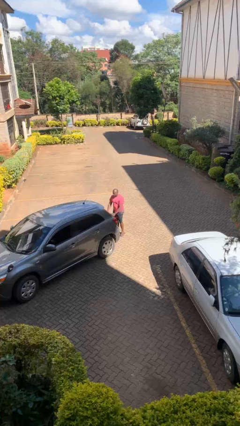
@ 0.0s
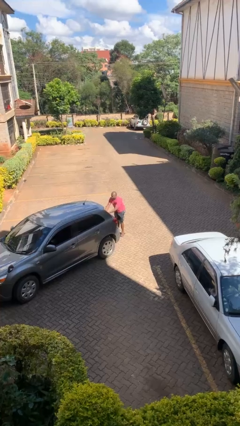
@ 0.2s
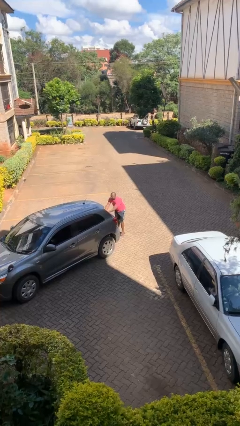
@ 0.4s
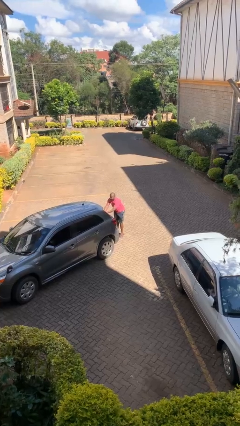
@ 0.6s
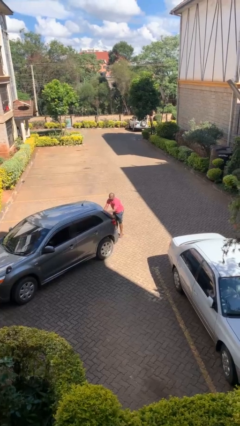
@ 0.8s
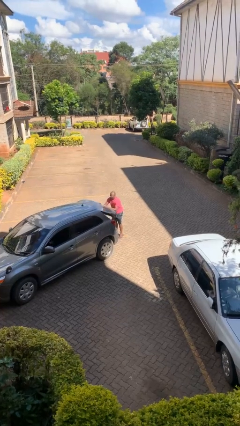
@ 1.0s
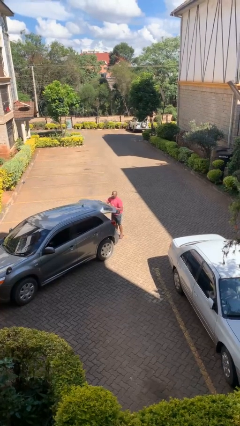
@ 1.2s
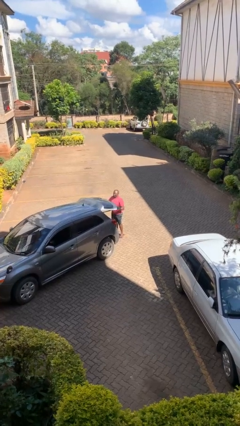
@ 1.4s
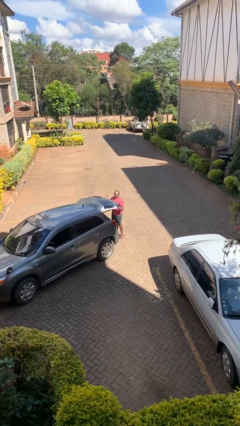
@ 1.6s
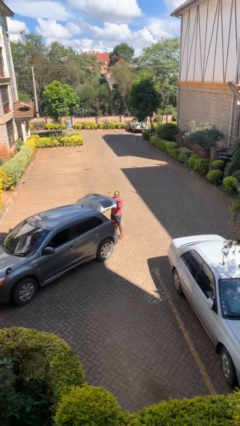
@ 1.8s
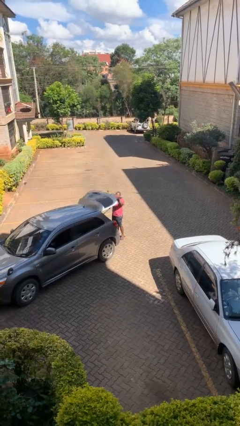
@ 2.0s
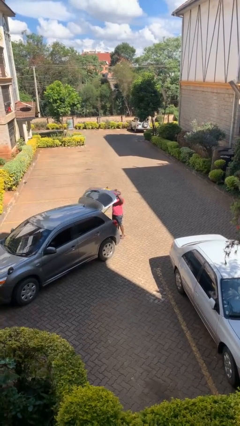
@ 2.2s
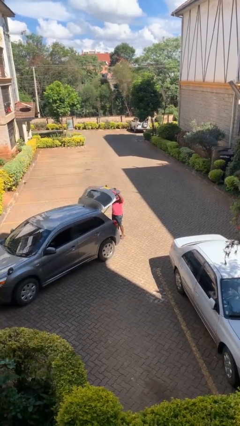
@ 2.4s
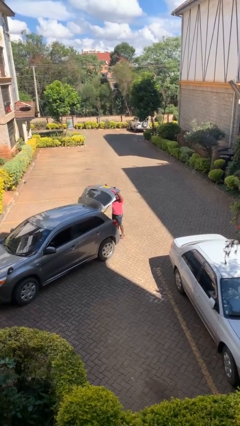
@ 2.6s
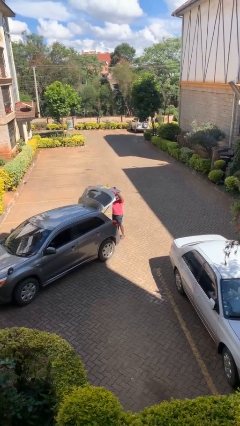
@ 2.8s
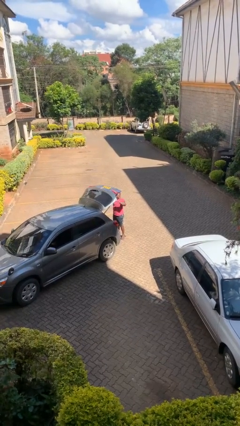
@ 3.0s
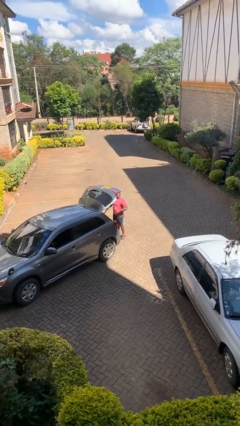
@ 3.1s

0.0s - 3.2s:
person opens car trunk

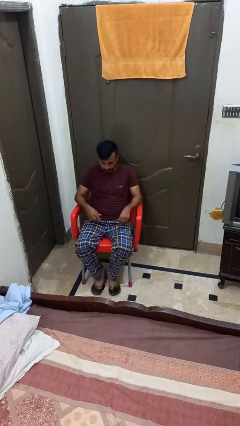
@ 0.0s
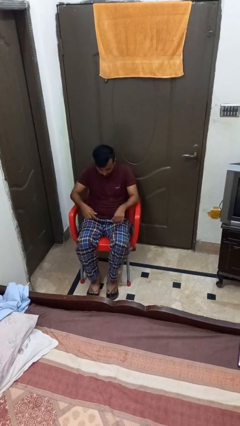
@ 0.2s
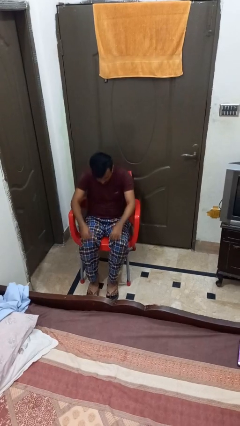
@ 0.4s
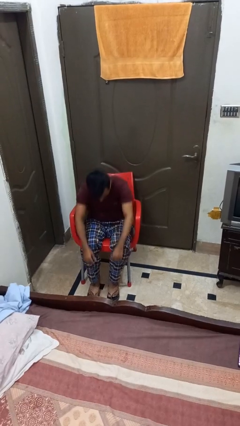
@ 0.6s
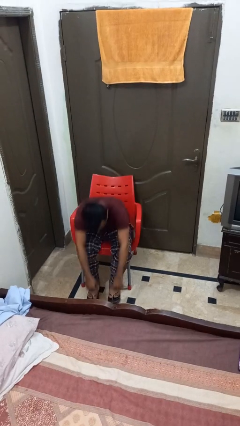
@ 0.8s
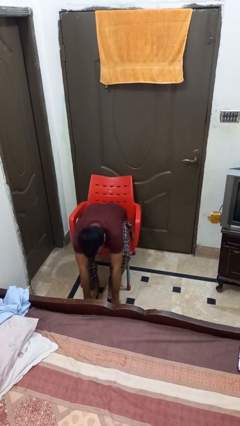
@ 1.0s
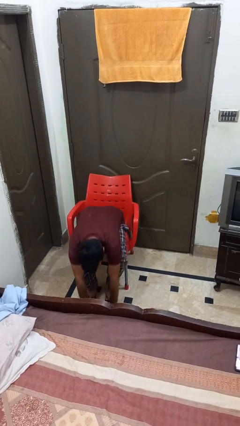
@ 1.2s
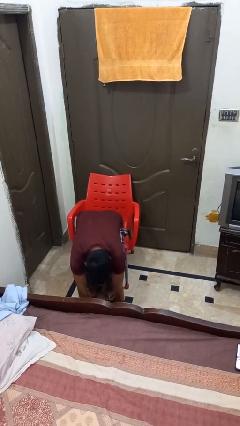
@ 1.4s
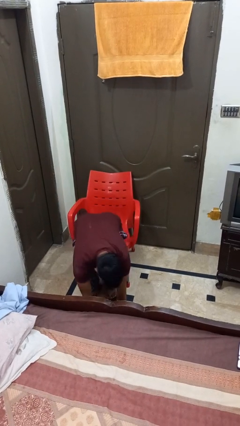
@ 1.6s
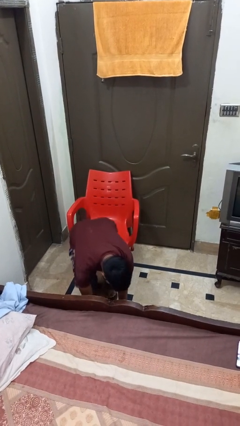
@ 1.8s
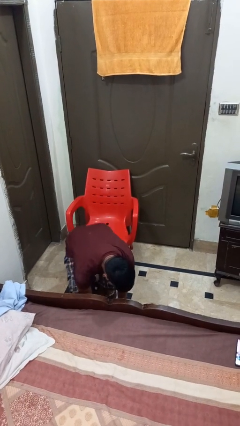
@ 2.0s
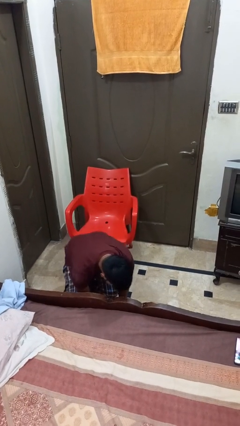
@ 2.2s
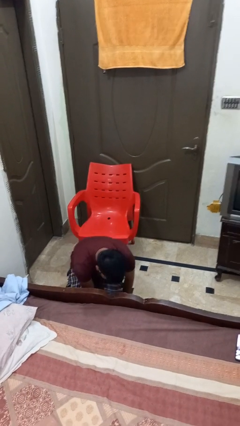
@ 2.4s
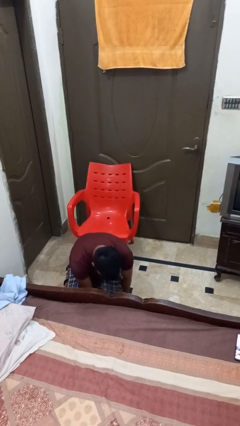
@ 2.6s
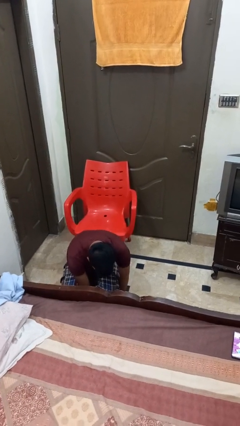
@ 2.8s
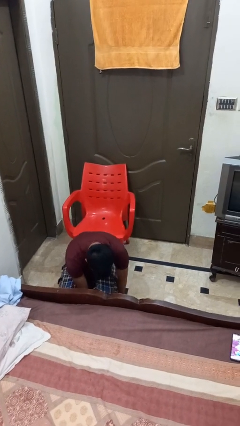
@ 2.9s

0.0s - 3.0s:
person falls from chair

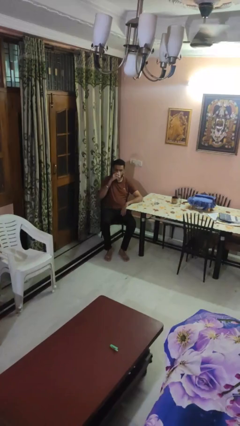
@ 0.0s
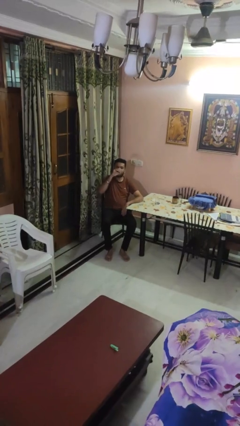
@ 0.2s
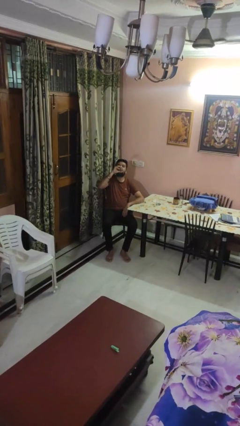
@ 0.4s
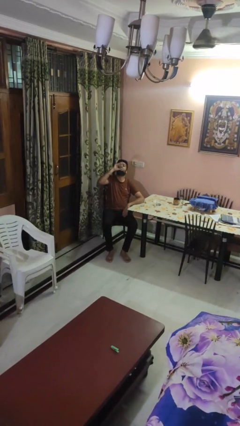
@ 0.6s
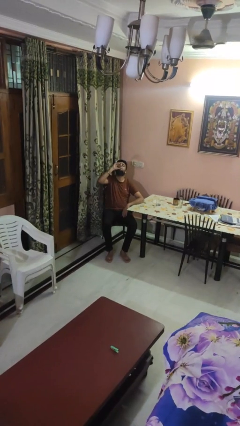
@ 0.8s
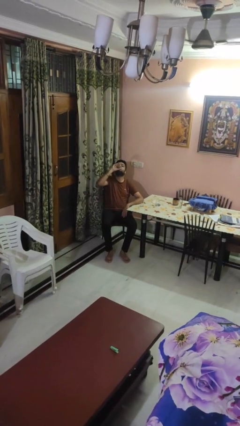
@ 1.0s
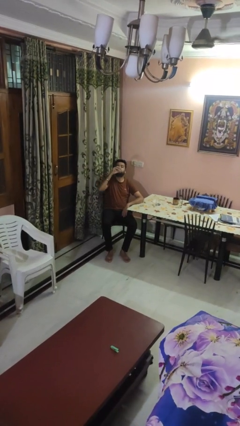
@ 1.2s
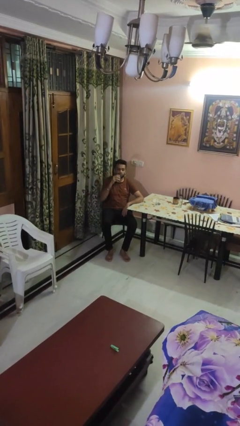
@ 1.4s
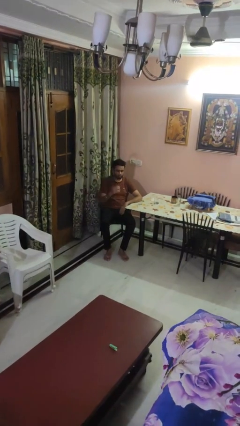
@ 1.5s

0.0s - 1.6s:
person drinks from shotglass

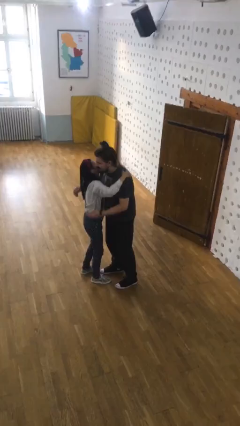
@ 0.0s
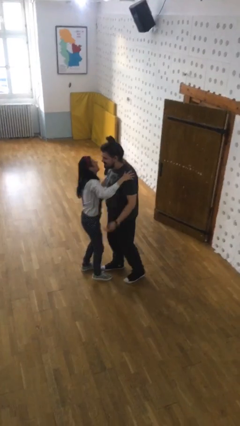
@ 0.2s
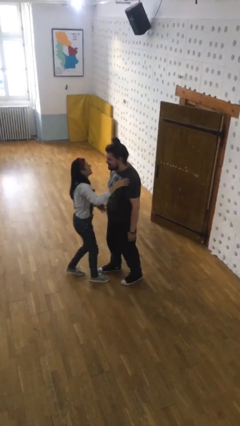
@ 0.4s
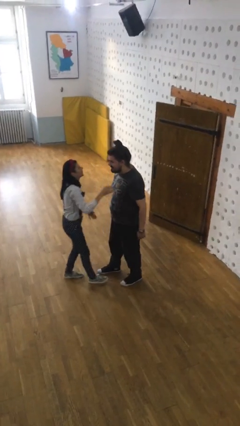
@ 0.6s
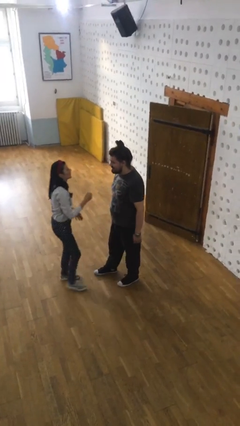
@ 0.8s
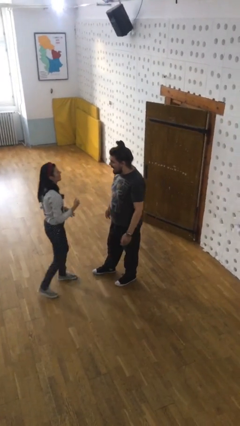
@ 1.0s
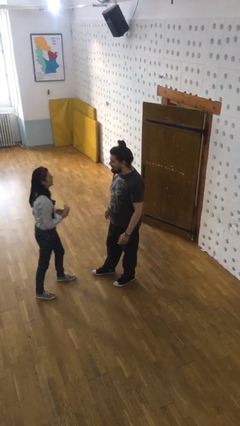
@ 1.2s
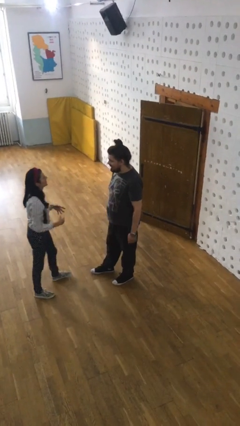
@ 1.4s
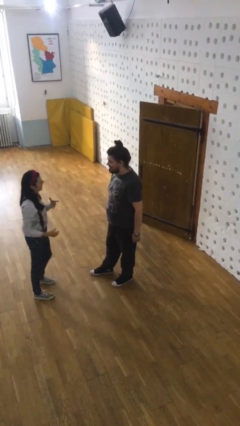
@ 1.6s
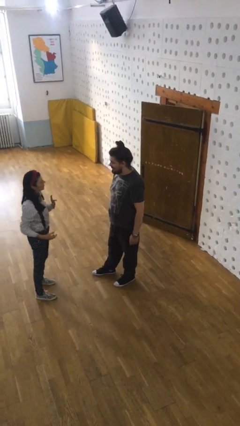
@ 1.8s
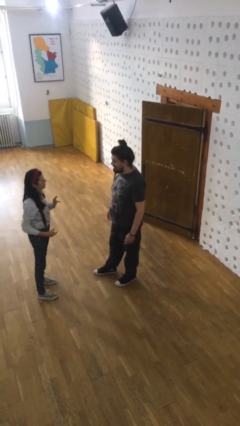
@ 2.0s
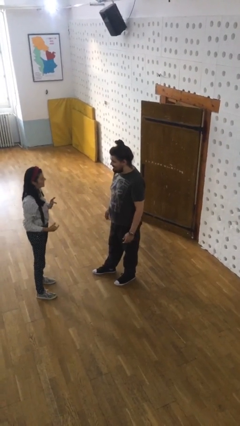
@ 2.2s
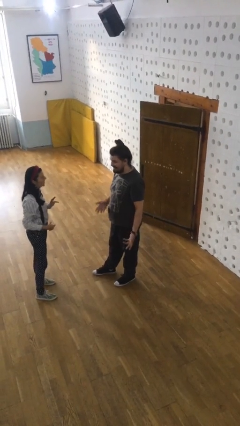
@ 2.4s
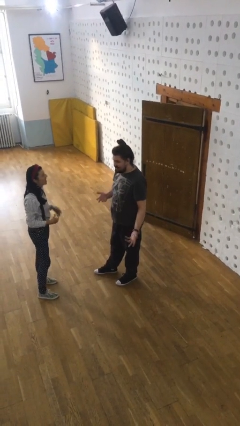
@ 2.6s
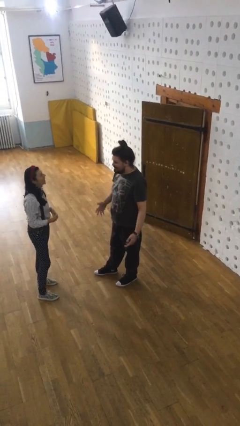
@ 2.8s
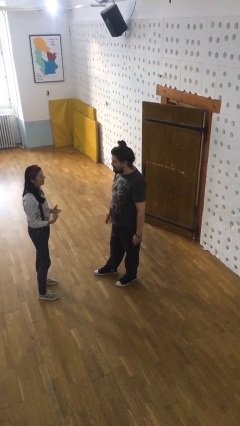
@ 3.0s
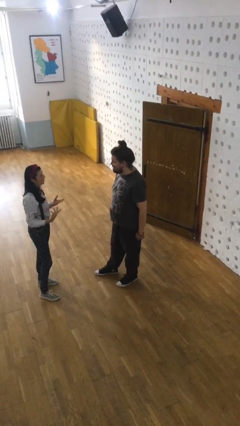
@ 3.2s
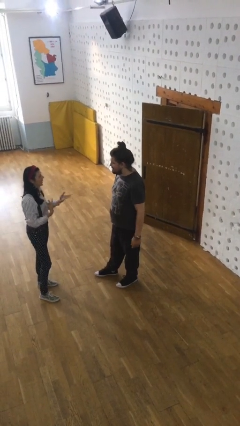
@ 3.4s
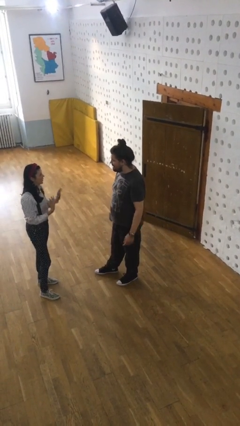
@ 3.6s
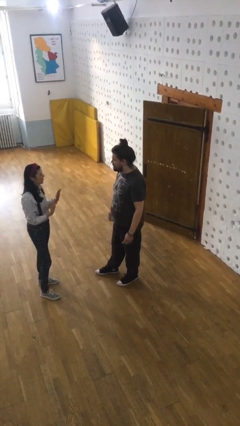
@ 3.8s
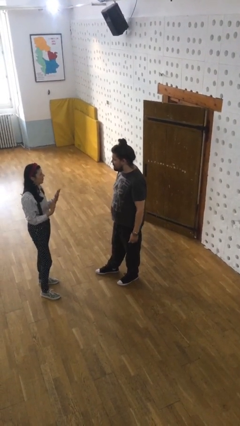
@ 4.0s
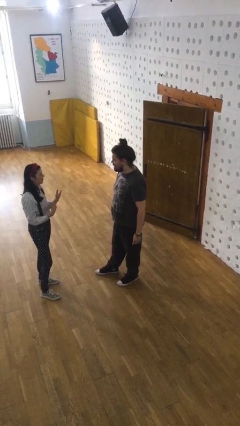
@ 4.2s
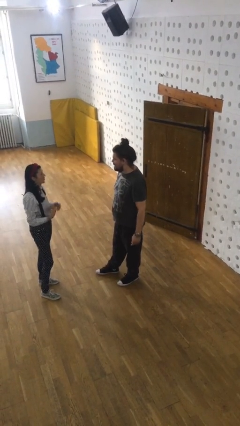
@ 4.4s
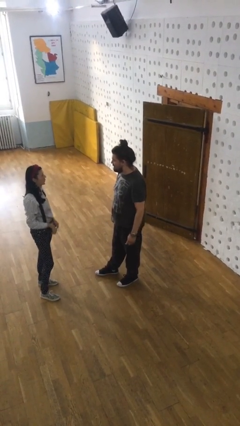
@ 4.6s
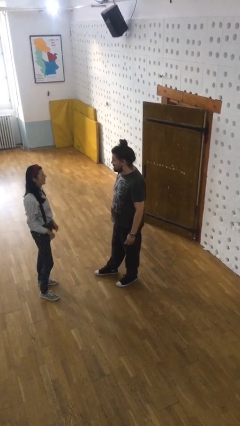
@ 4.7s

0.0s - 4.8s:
person talks to person

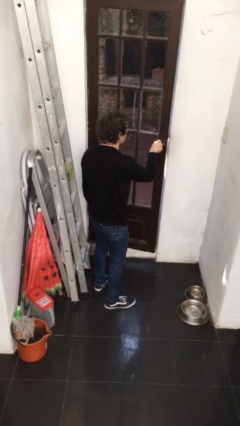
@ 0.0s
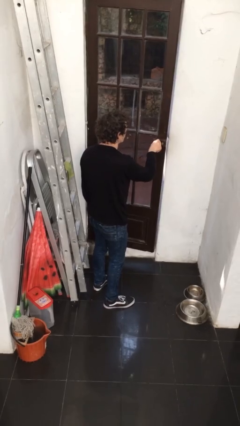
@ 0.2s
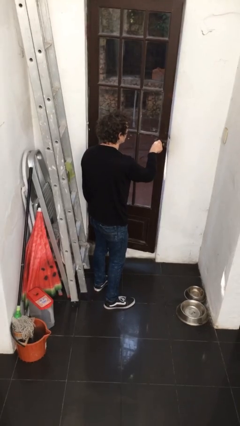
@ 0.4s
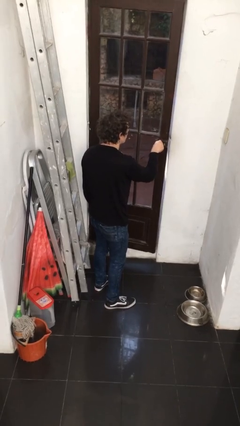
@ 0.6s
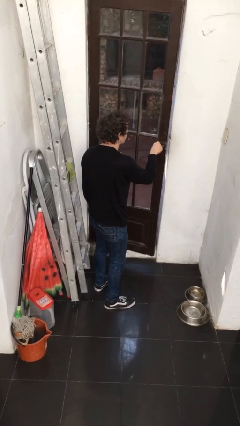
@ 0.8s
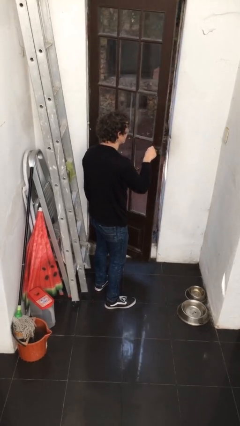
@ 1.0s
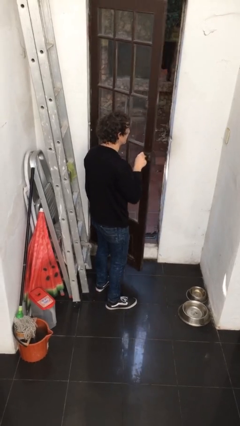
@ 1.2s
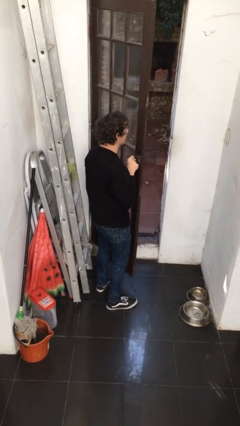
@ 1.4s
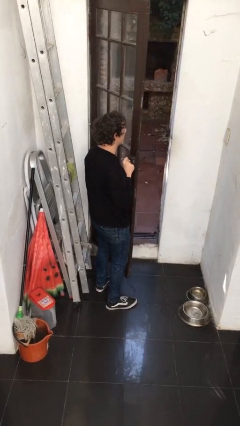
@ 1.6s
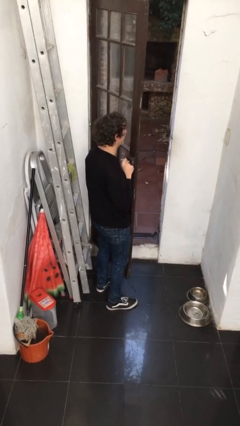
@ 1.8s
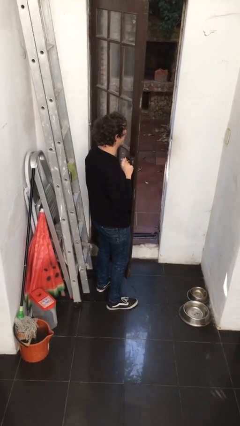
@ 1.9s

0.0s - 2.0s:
person opens facility door

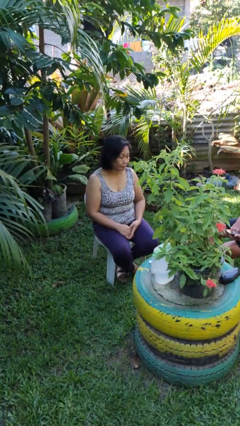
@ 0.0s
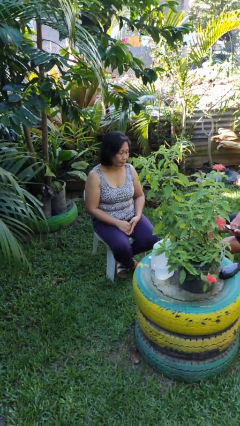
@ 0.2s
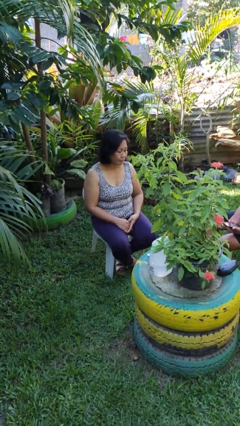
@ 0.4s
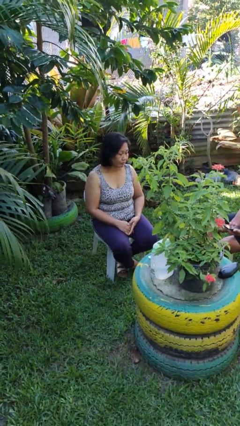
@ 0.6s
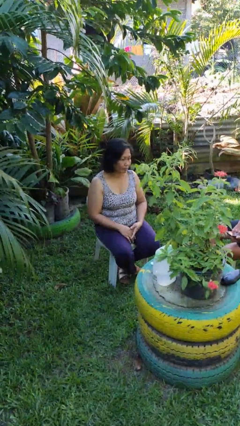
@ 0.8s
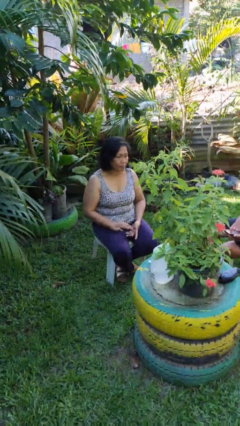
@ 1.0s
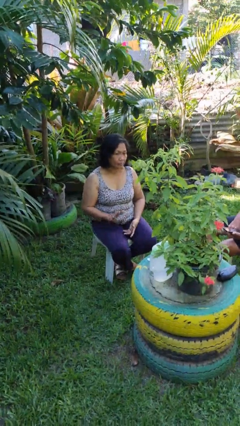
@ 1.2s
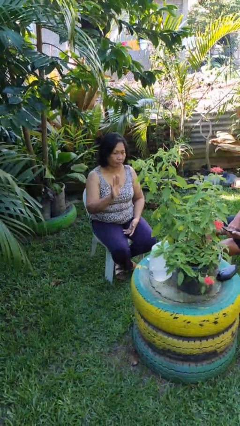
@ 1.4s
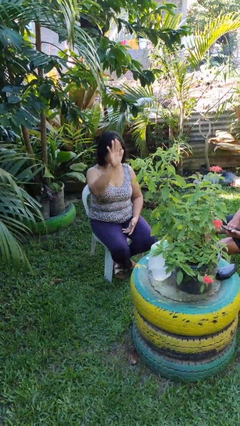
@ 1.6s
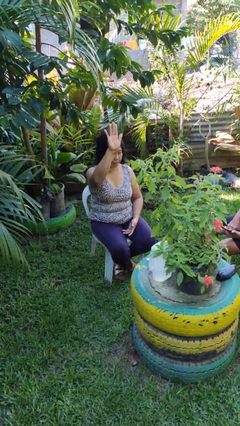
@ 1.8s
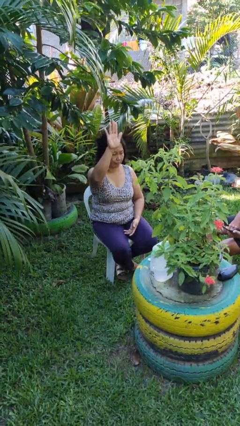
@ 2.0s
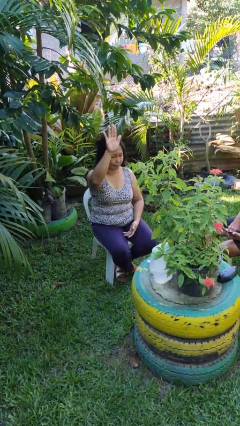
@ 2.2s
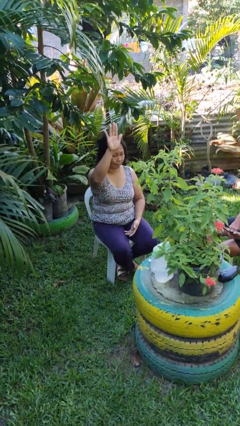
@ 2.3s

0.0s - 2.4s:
person gestures swipe up
